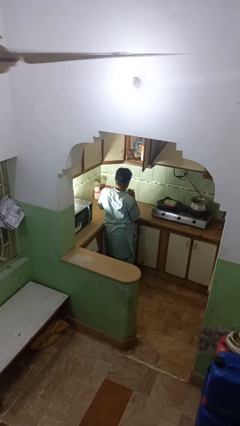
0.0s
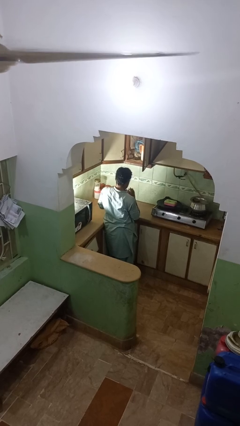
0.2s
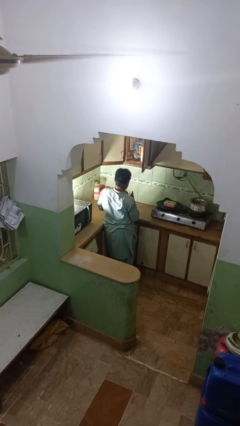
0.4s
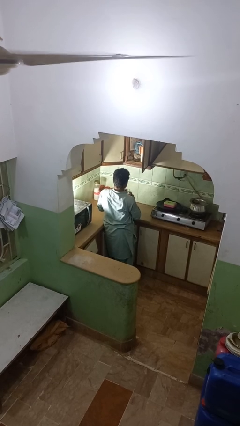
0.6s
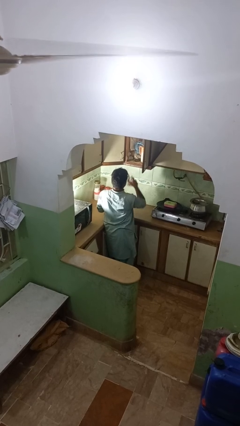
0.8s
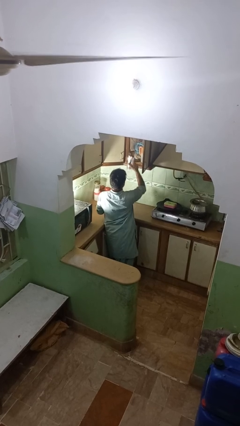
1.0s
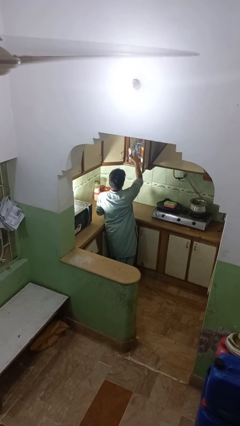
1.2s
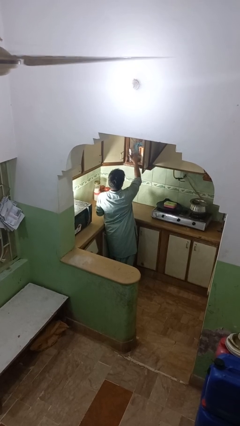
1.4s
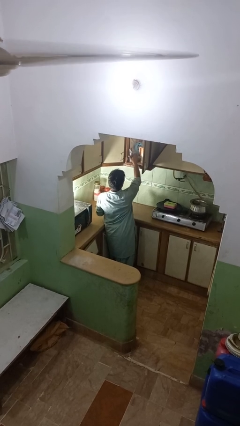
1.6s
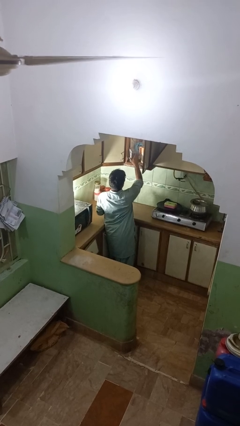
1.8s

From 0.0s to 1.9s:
person puts object into kitchen drawer

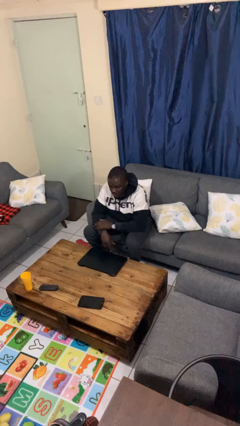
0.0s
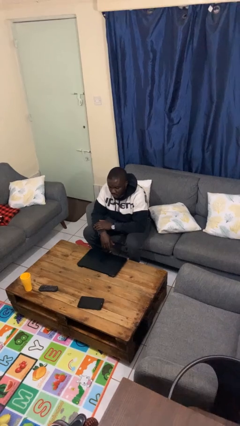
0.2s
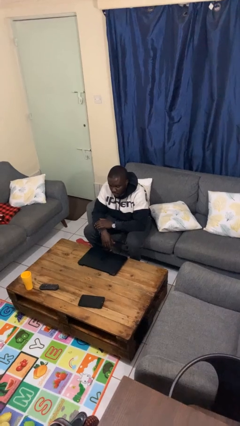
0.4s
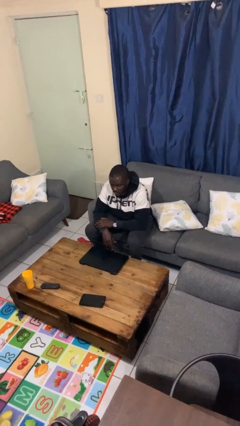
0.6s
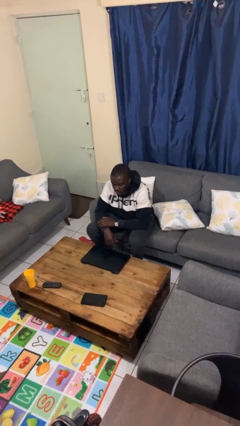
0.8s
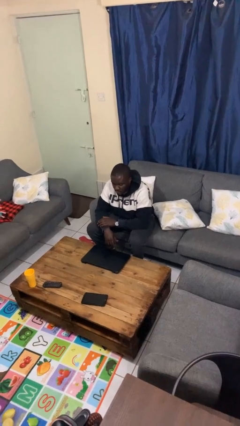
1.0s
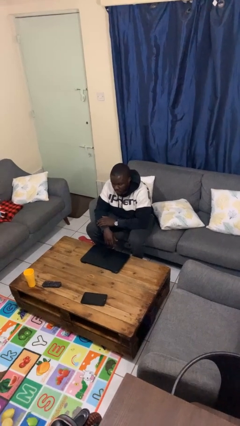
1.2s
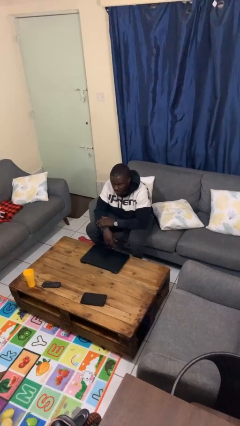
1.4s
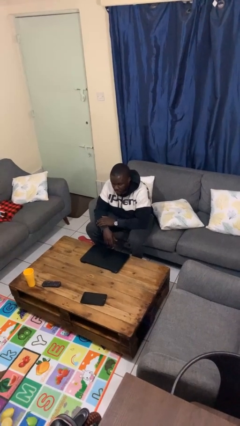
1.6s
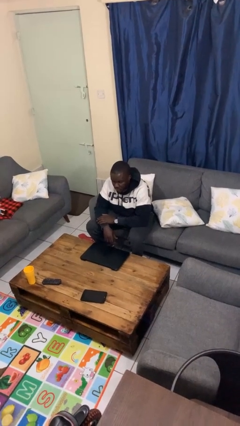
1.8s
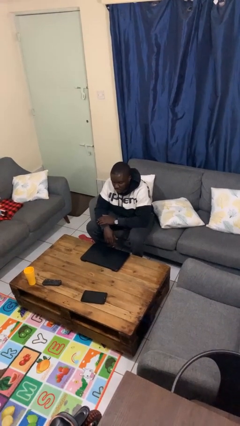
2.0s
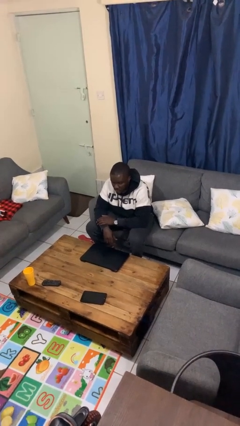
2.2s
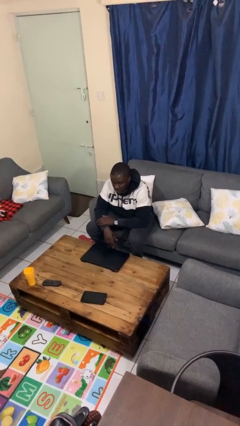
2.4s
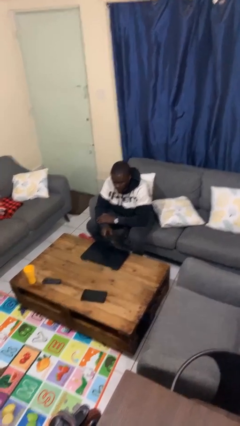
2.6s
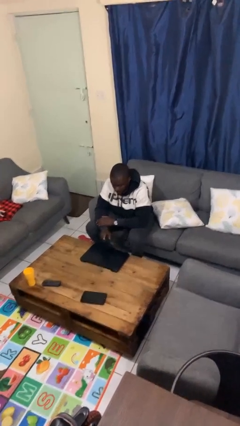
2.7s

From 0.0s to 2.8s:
person taps object with finger

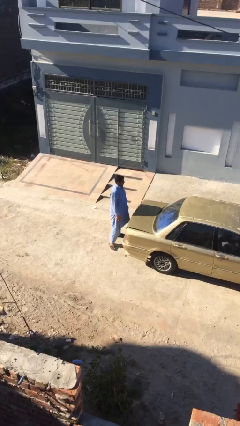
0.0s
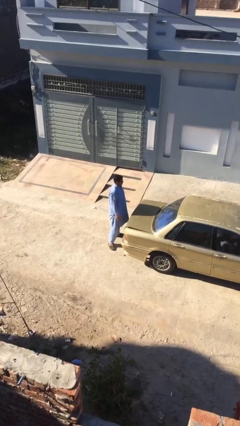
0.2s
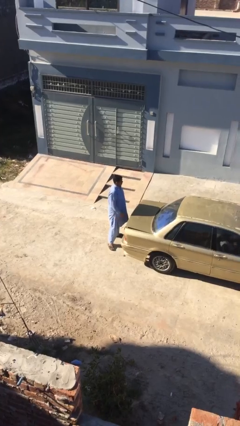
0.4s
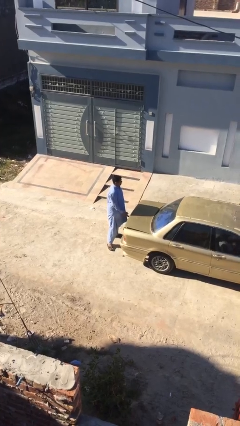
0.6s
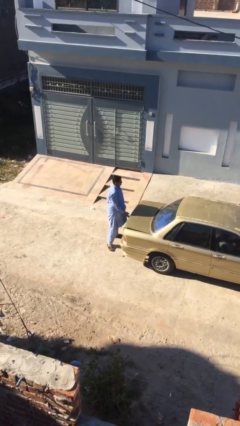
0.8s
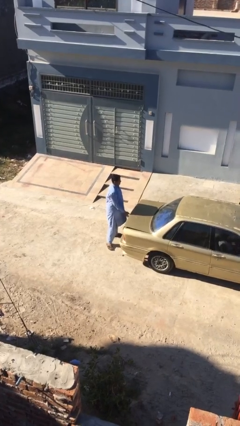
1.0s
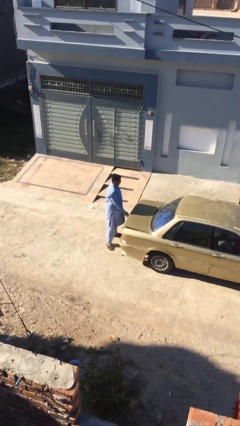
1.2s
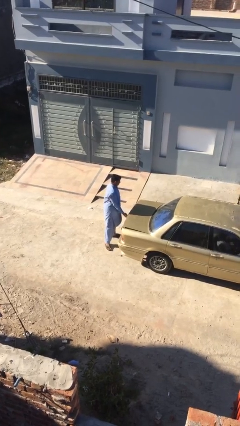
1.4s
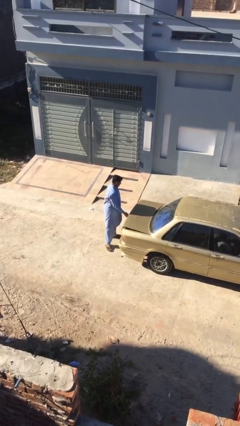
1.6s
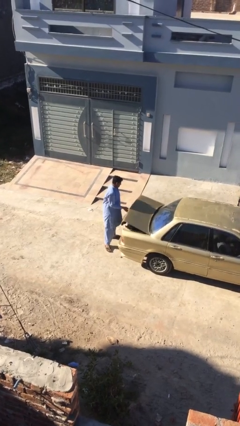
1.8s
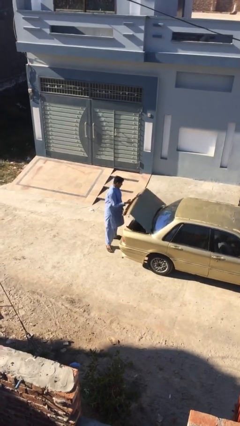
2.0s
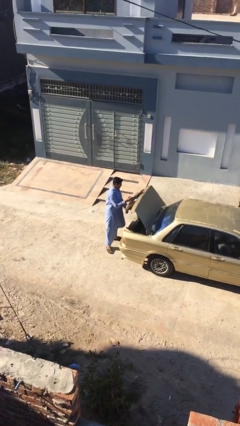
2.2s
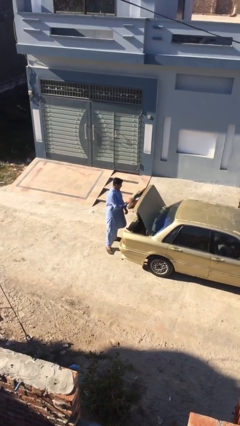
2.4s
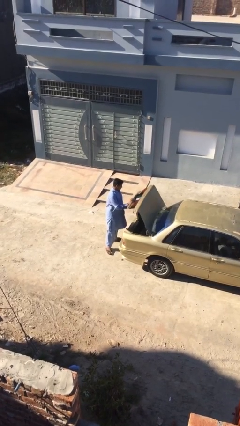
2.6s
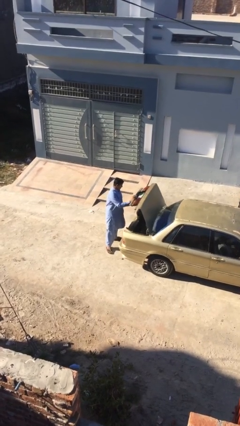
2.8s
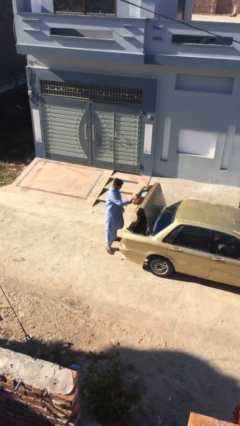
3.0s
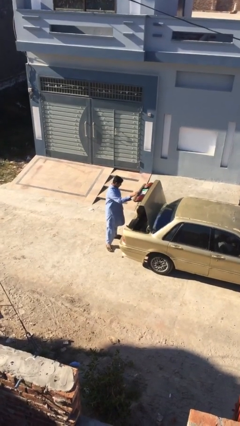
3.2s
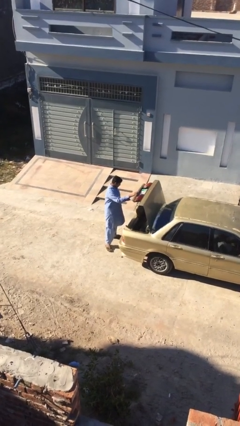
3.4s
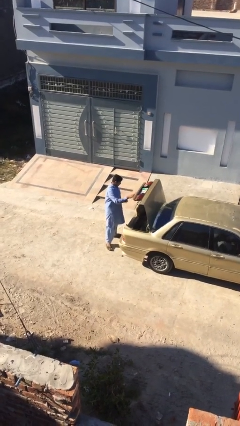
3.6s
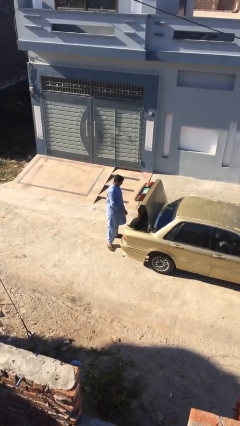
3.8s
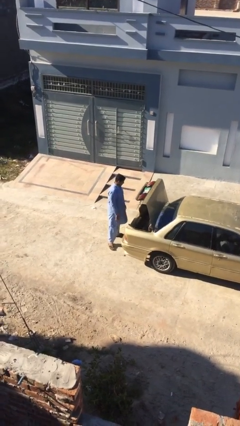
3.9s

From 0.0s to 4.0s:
person opens car trunk

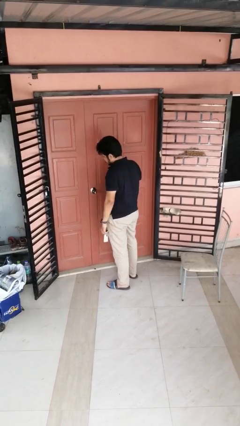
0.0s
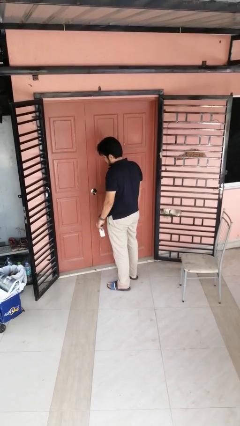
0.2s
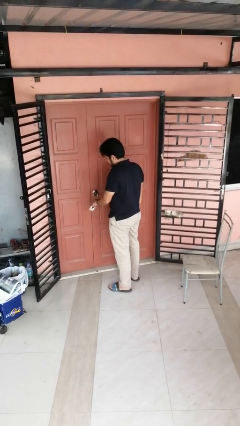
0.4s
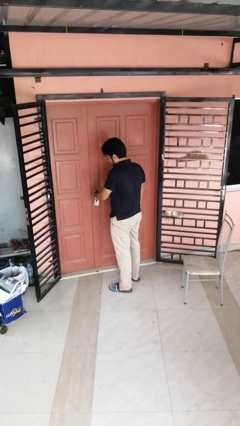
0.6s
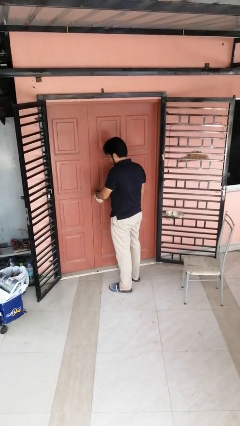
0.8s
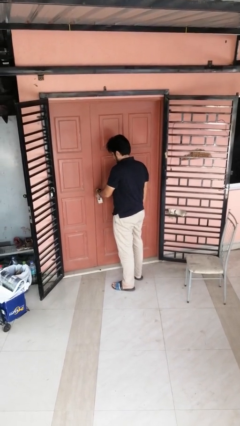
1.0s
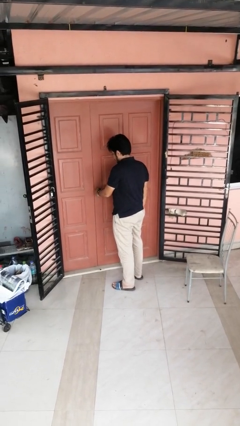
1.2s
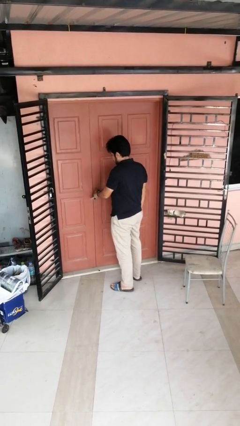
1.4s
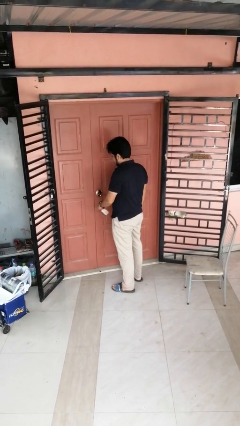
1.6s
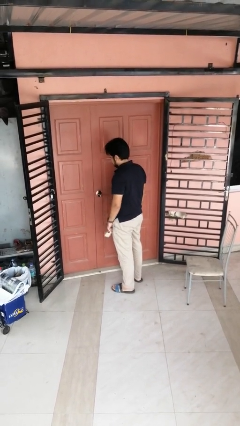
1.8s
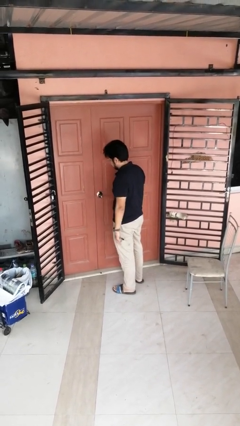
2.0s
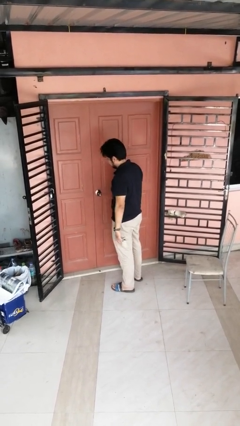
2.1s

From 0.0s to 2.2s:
person unlocks door with keys

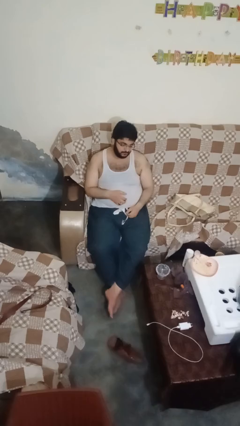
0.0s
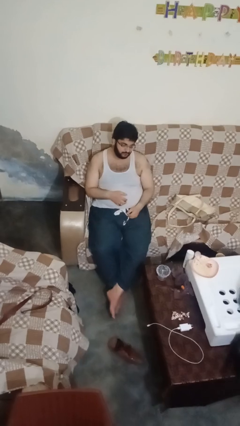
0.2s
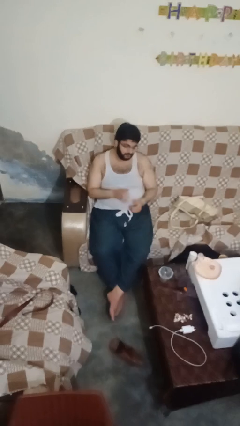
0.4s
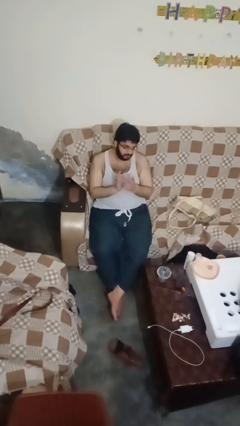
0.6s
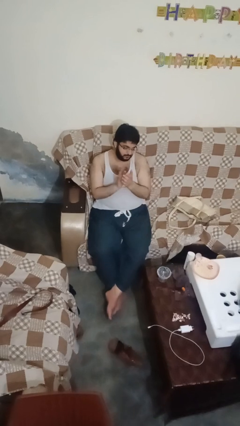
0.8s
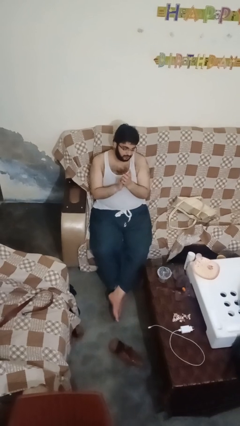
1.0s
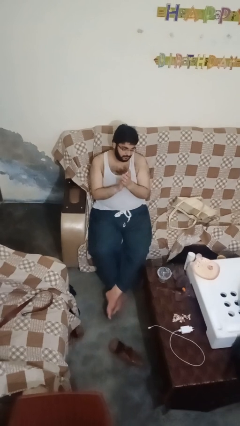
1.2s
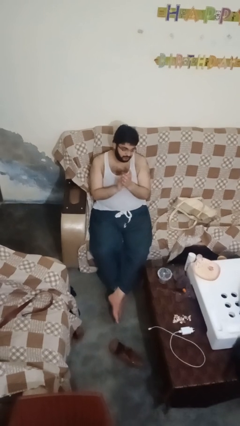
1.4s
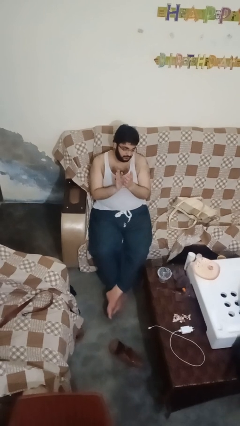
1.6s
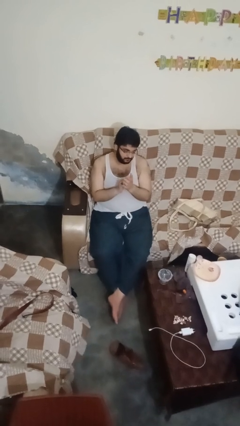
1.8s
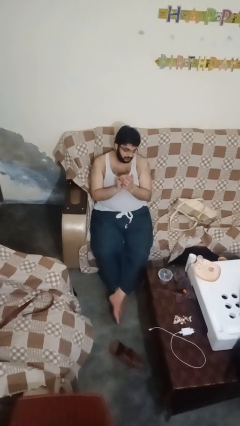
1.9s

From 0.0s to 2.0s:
person claps hands

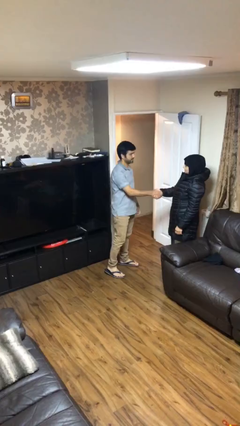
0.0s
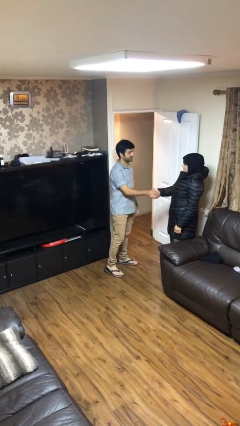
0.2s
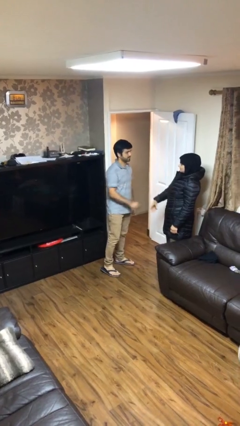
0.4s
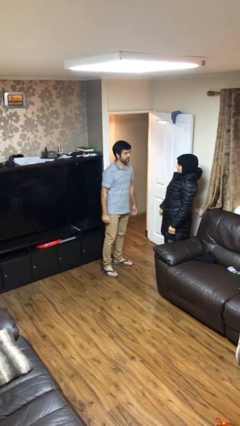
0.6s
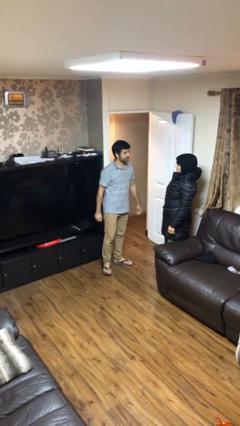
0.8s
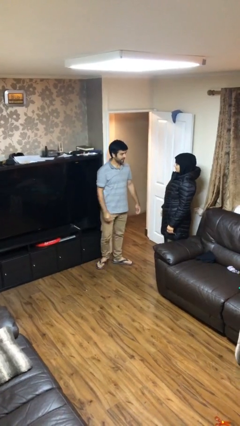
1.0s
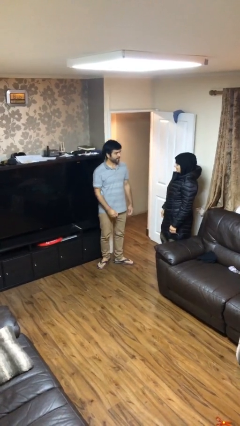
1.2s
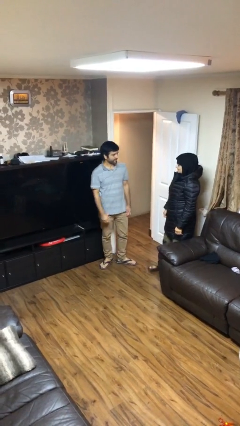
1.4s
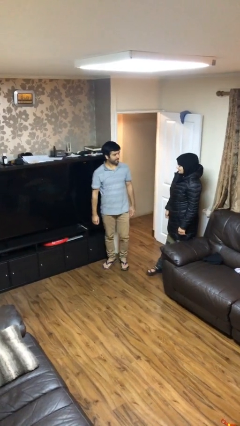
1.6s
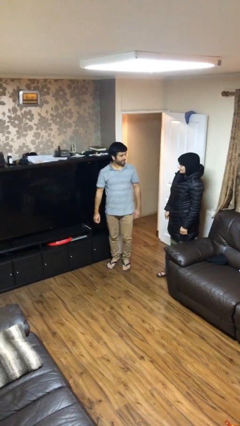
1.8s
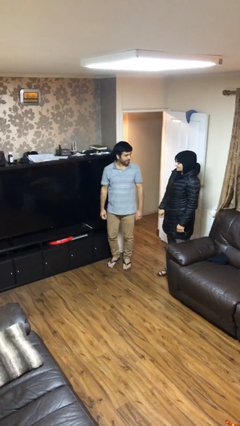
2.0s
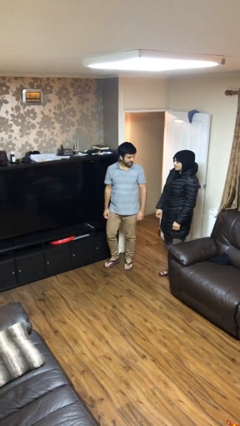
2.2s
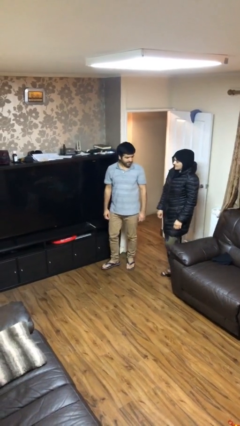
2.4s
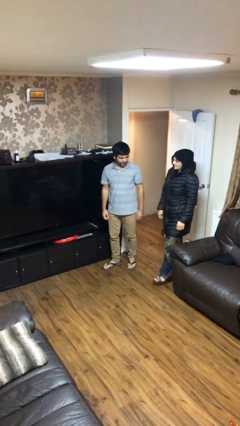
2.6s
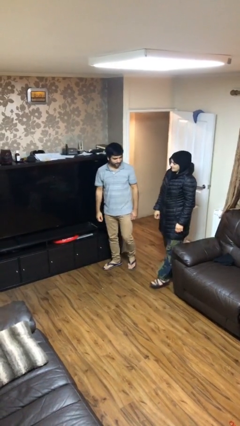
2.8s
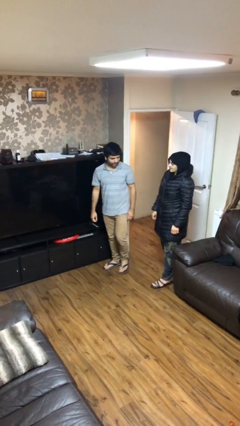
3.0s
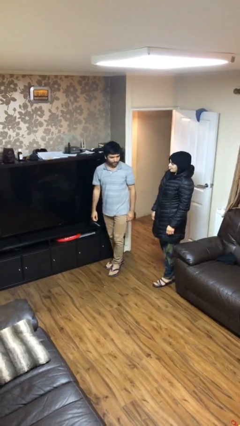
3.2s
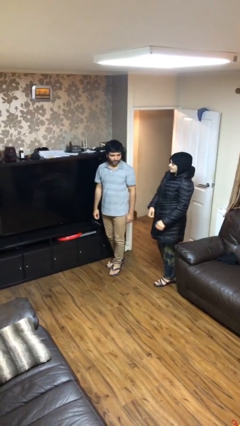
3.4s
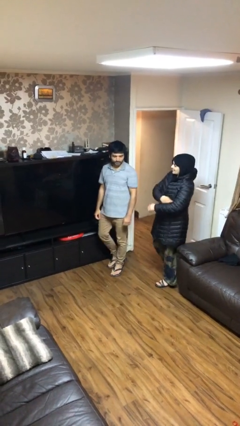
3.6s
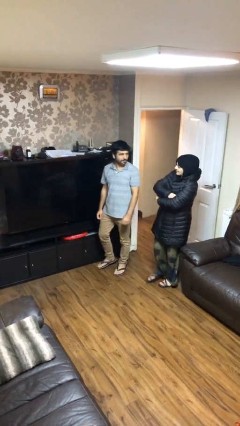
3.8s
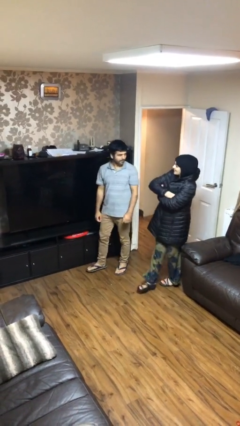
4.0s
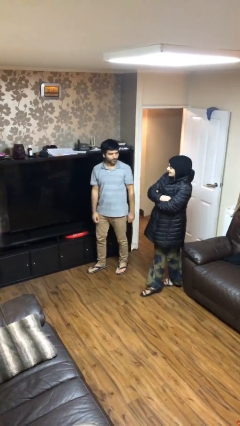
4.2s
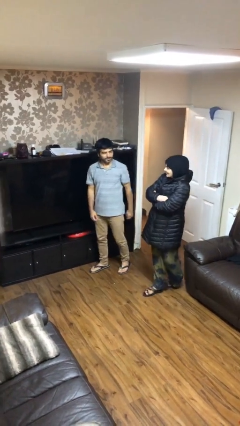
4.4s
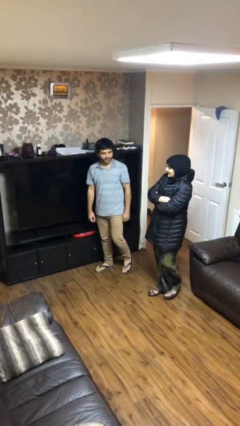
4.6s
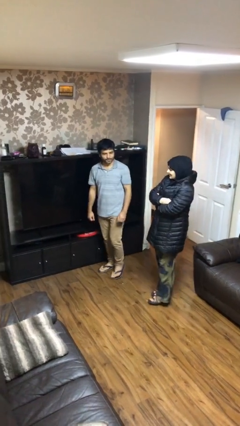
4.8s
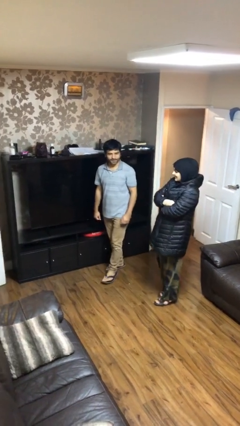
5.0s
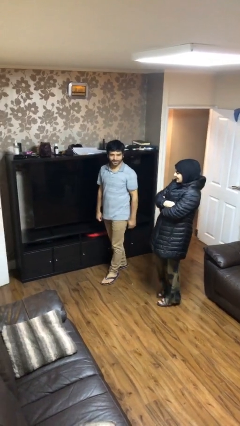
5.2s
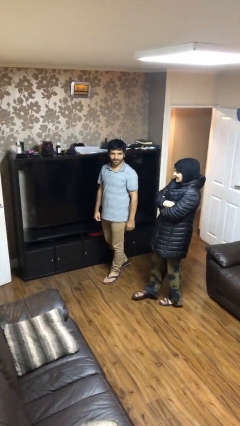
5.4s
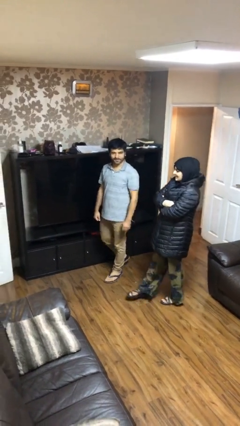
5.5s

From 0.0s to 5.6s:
person talks to person
